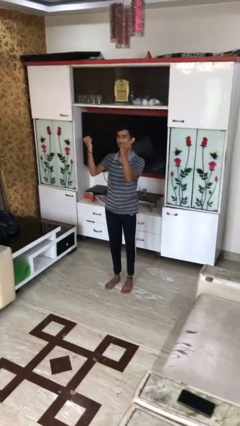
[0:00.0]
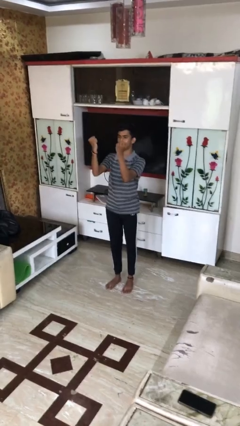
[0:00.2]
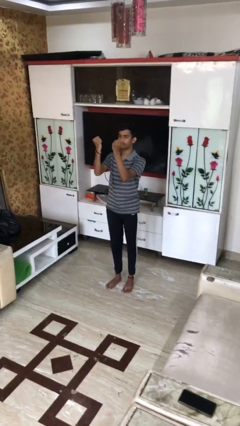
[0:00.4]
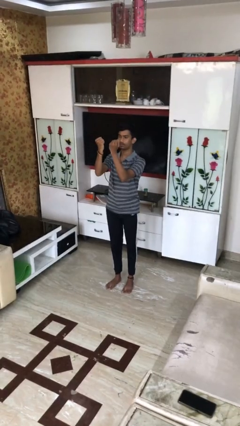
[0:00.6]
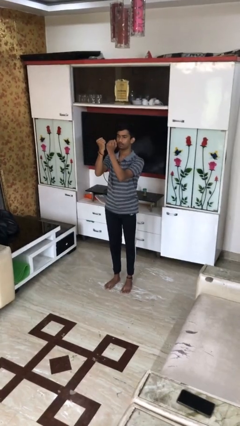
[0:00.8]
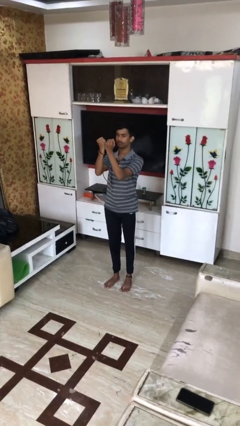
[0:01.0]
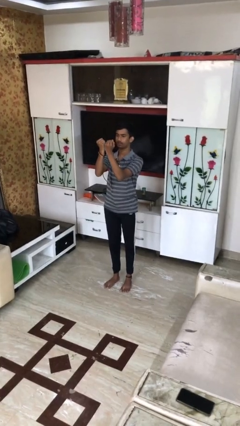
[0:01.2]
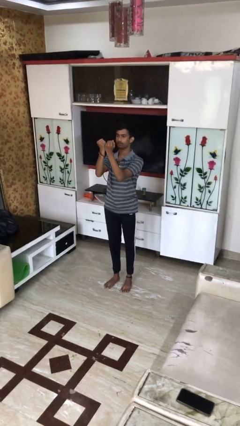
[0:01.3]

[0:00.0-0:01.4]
person gestures zoom out

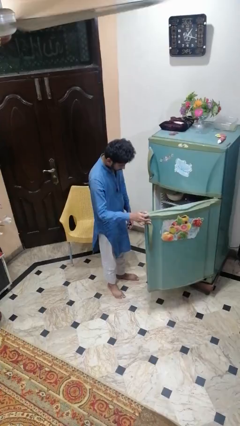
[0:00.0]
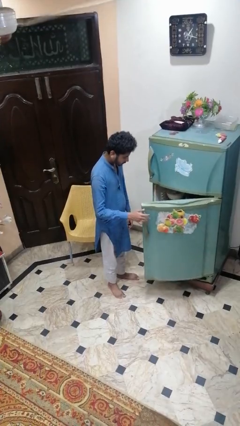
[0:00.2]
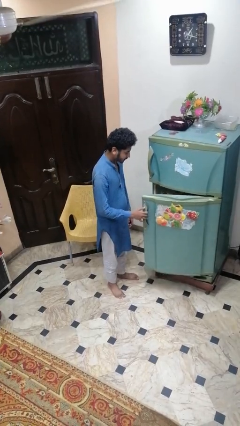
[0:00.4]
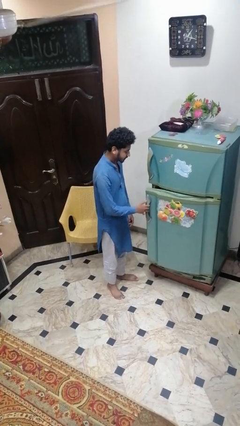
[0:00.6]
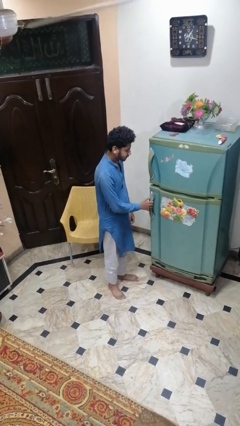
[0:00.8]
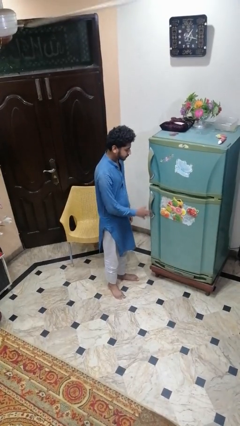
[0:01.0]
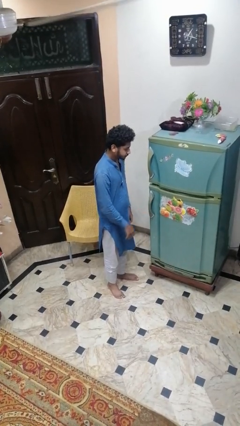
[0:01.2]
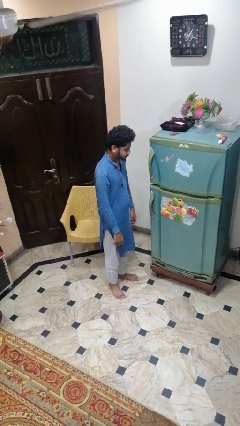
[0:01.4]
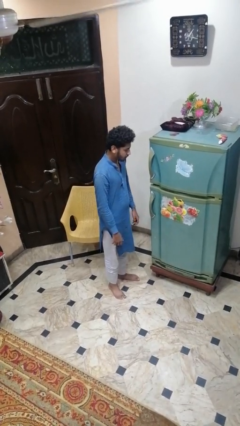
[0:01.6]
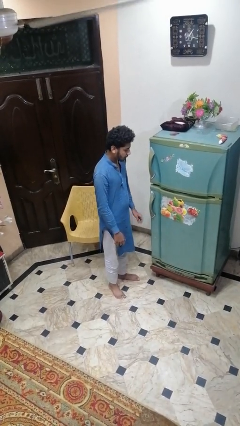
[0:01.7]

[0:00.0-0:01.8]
person closes refrigerator

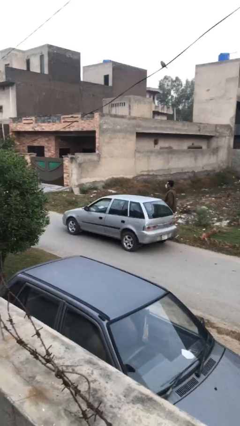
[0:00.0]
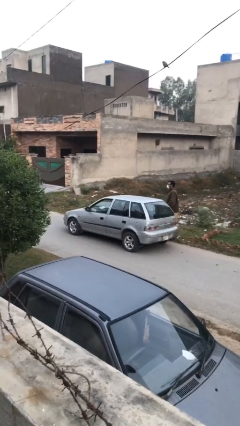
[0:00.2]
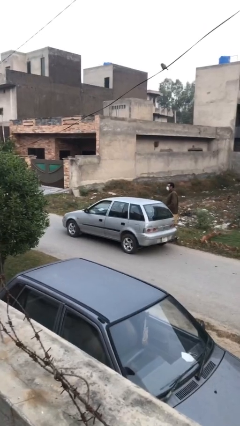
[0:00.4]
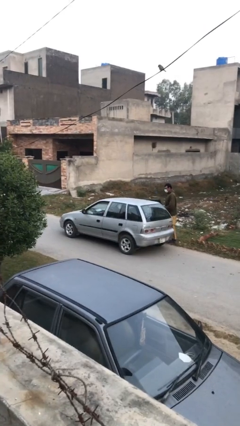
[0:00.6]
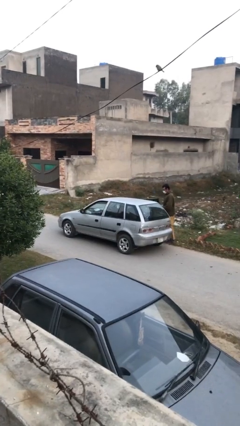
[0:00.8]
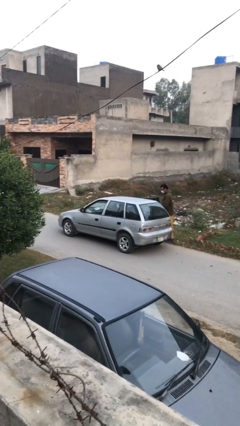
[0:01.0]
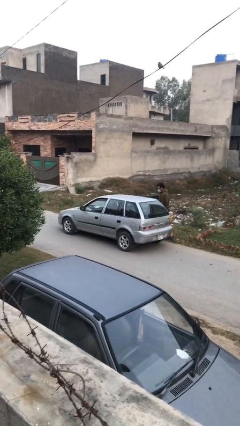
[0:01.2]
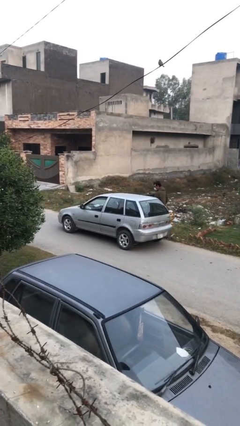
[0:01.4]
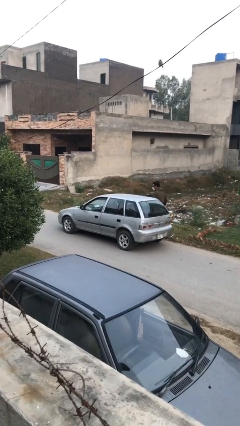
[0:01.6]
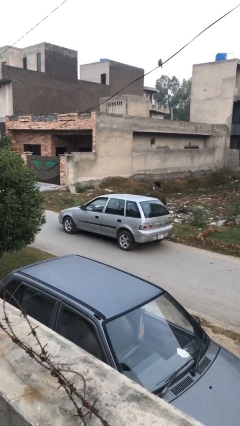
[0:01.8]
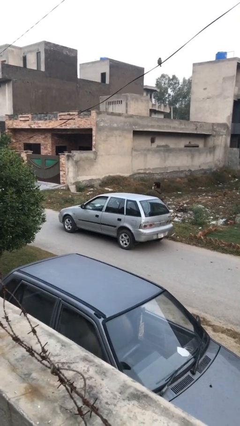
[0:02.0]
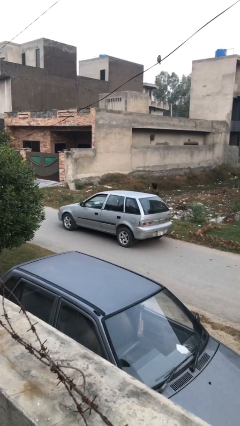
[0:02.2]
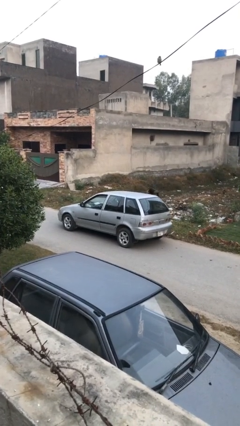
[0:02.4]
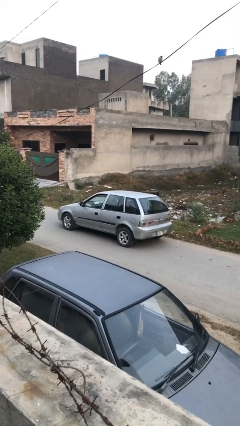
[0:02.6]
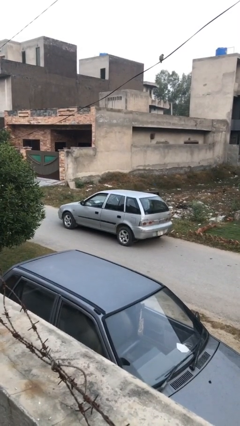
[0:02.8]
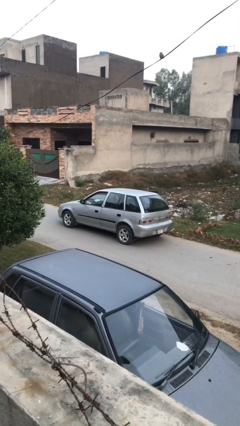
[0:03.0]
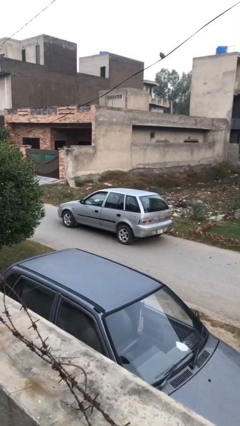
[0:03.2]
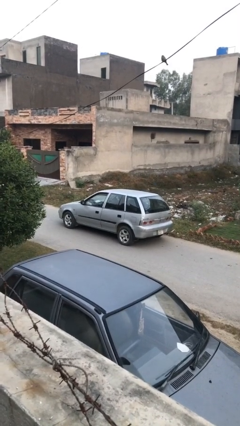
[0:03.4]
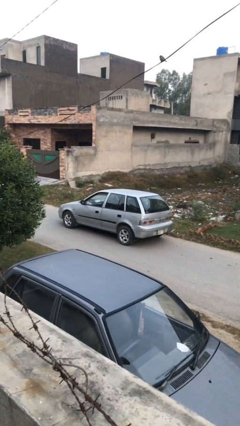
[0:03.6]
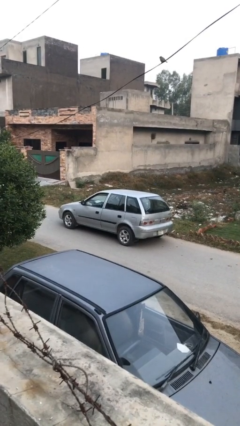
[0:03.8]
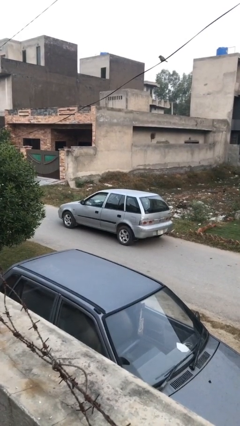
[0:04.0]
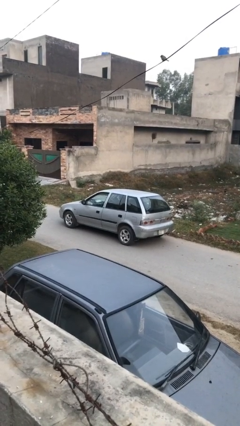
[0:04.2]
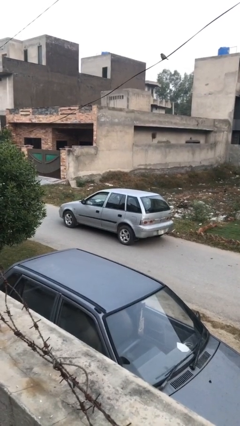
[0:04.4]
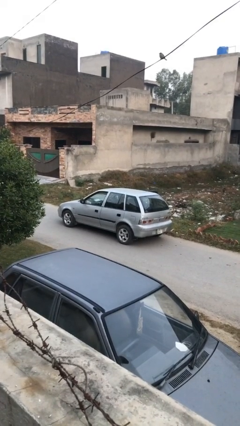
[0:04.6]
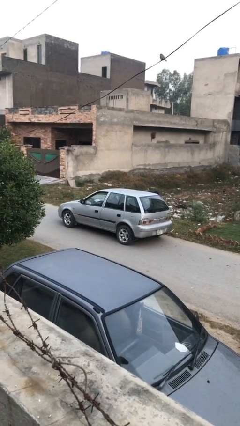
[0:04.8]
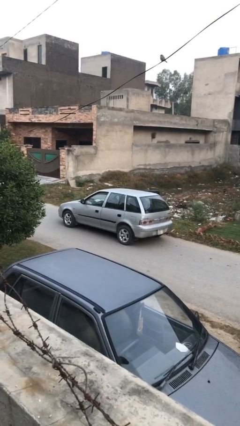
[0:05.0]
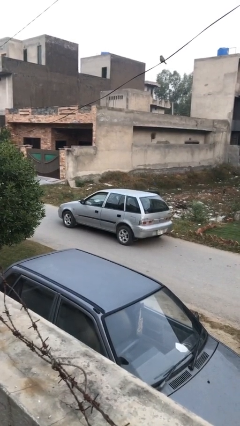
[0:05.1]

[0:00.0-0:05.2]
car picks up person

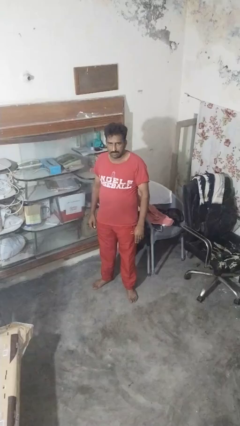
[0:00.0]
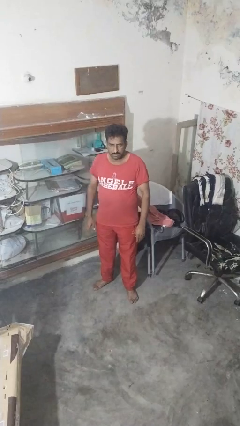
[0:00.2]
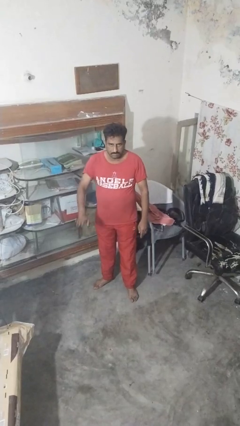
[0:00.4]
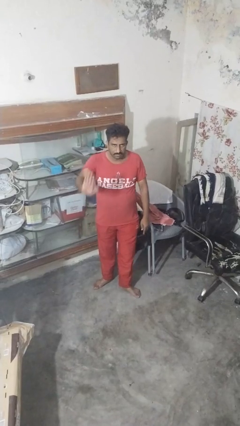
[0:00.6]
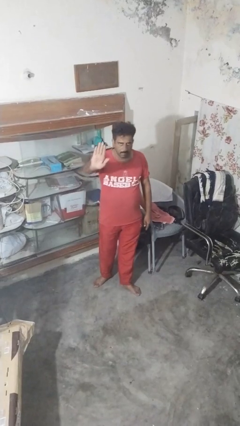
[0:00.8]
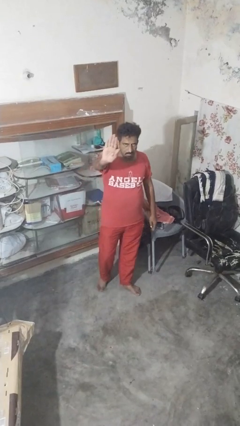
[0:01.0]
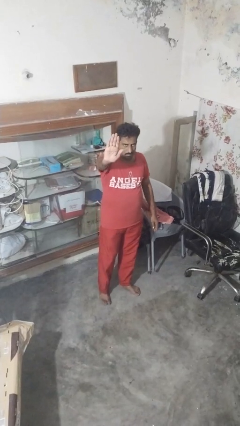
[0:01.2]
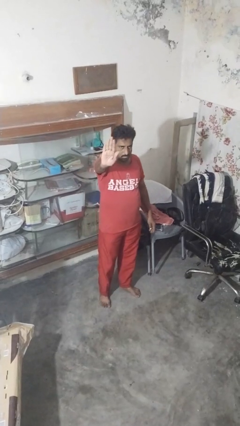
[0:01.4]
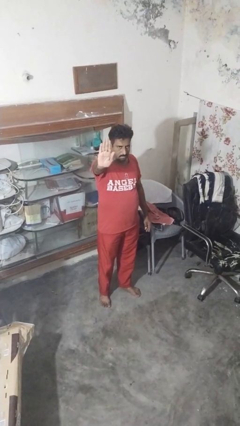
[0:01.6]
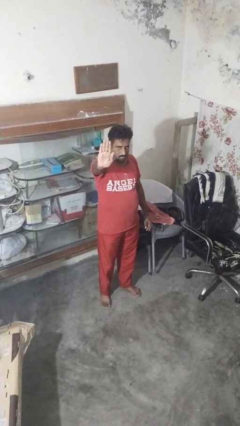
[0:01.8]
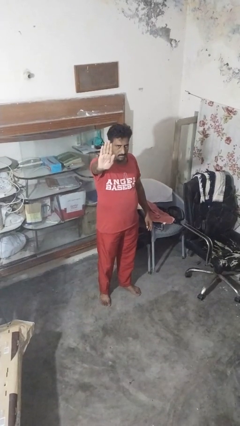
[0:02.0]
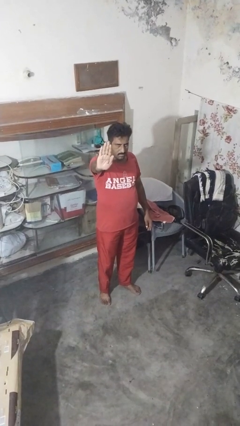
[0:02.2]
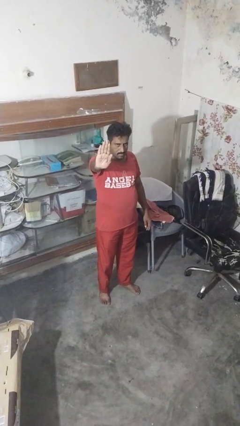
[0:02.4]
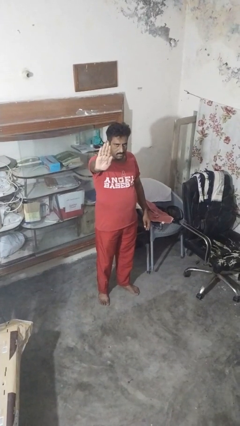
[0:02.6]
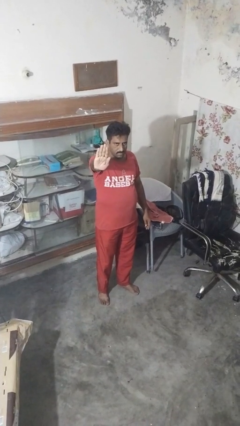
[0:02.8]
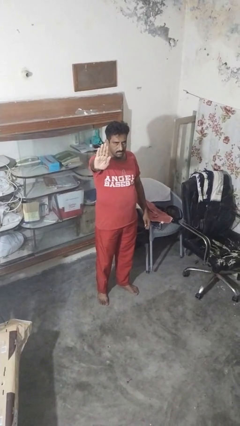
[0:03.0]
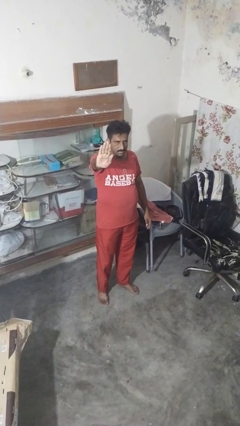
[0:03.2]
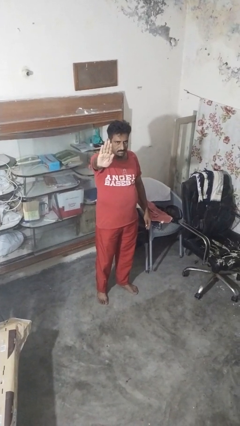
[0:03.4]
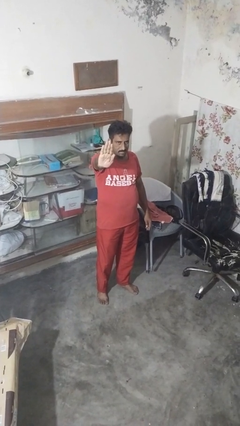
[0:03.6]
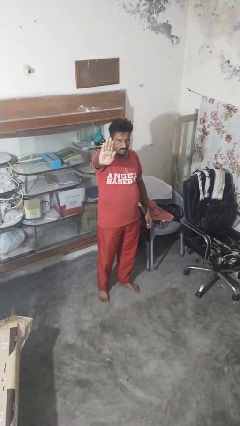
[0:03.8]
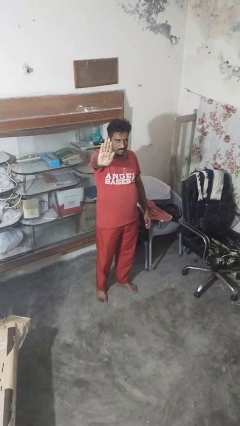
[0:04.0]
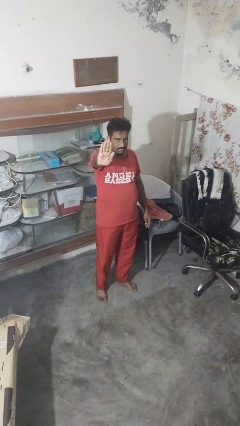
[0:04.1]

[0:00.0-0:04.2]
person gestures stop

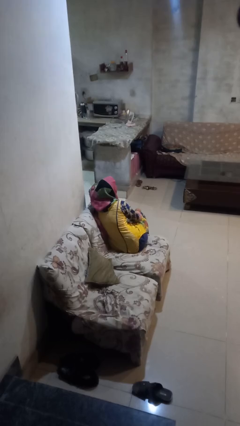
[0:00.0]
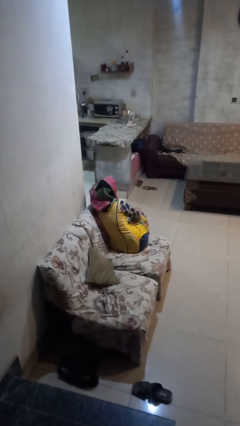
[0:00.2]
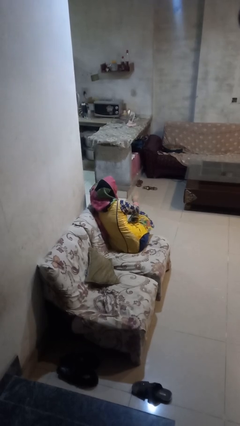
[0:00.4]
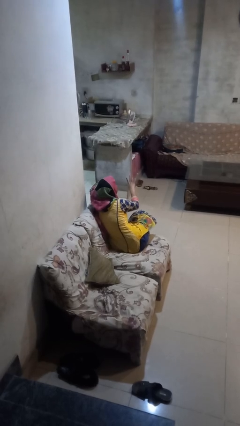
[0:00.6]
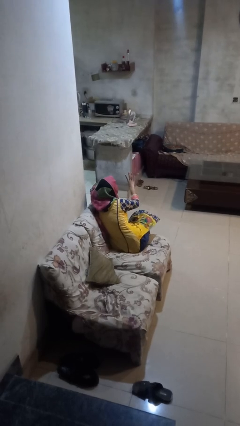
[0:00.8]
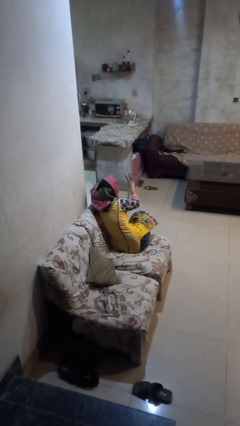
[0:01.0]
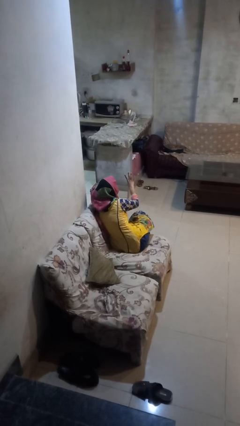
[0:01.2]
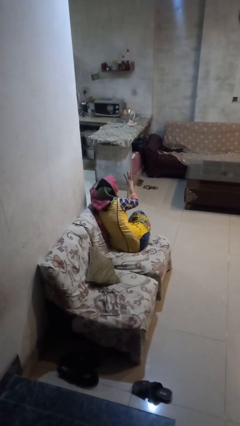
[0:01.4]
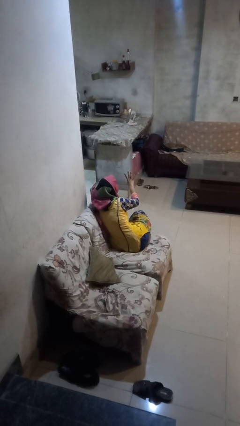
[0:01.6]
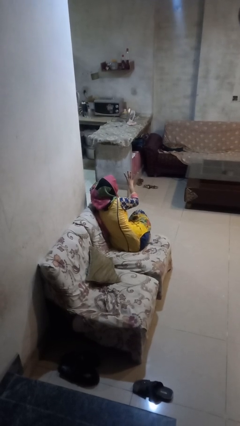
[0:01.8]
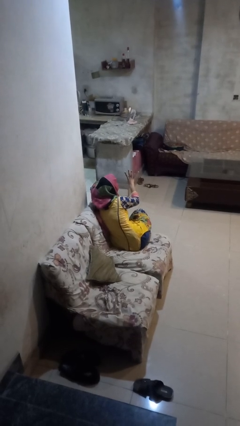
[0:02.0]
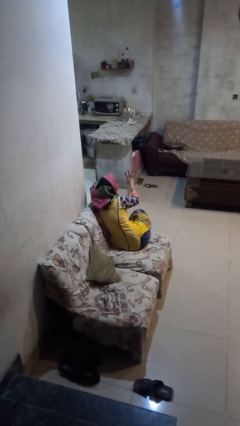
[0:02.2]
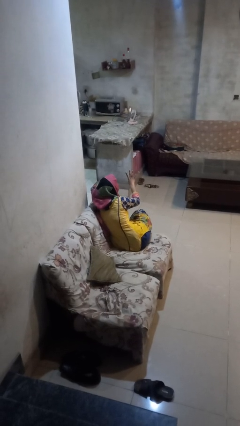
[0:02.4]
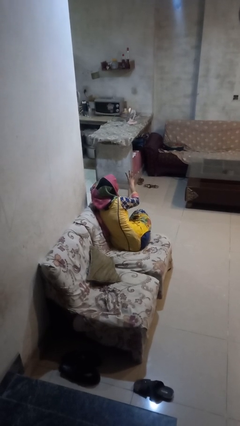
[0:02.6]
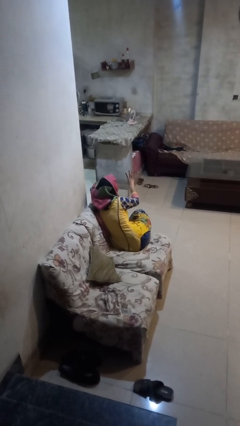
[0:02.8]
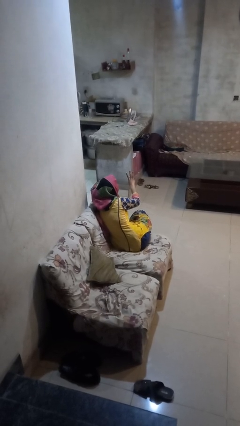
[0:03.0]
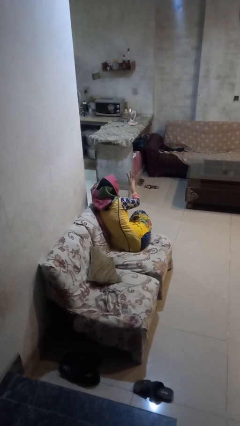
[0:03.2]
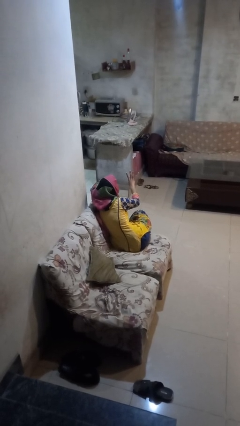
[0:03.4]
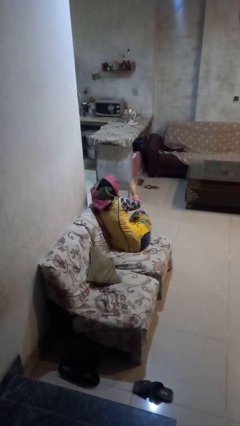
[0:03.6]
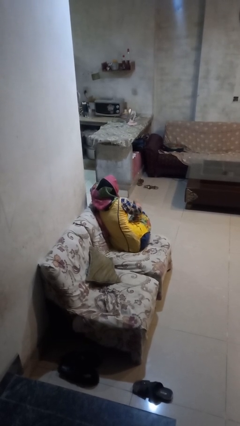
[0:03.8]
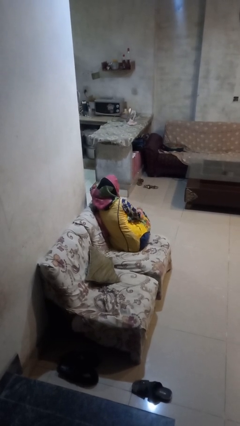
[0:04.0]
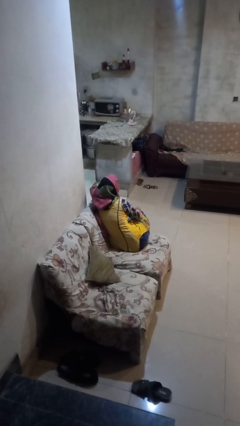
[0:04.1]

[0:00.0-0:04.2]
person gestures number four

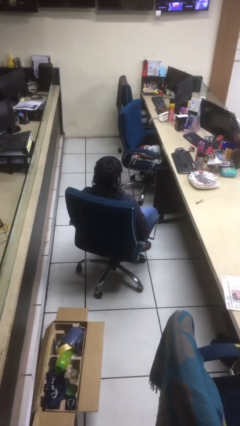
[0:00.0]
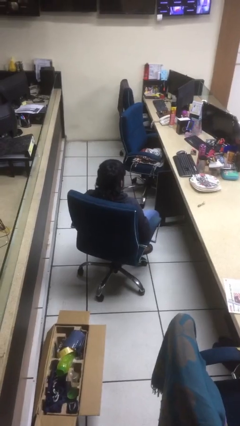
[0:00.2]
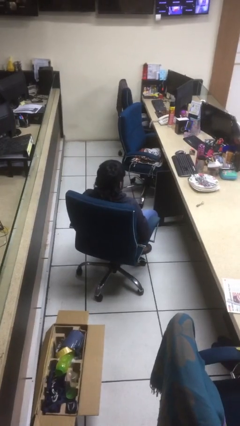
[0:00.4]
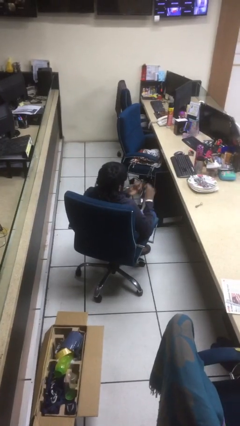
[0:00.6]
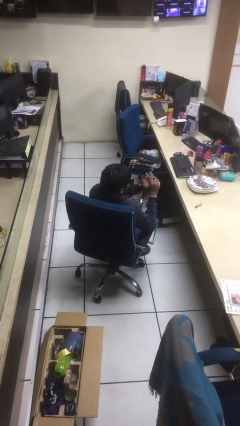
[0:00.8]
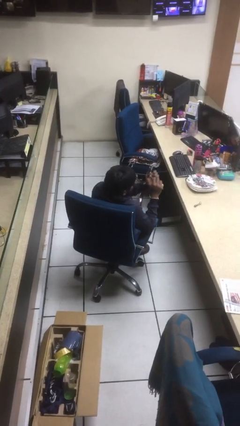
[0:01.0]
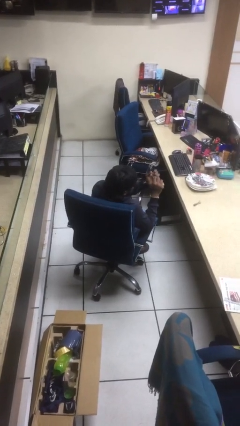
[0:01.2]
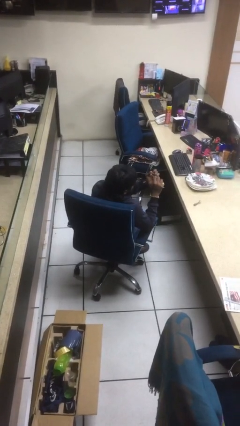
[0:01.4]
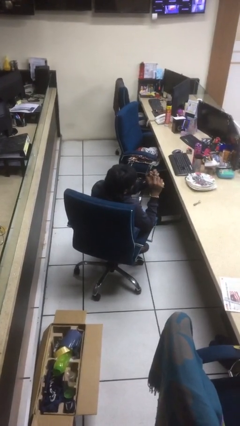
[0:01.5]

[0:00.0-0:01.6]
person files fingernails
